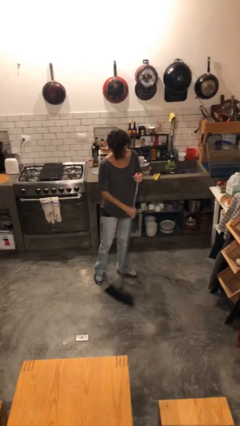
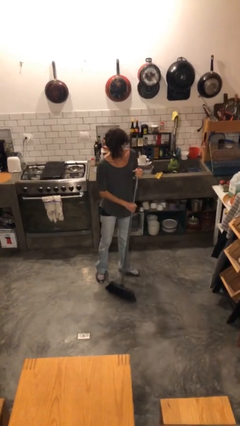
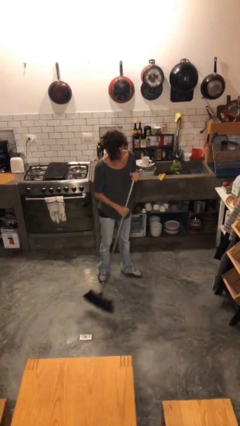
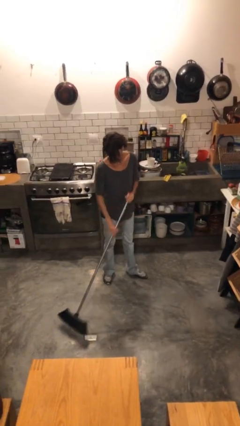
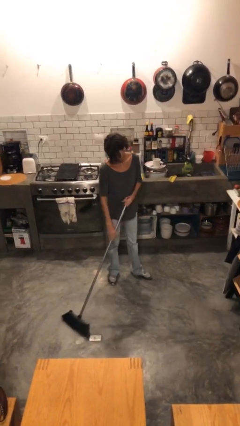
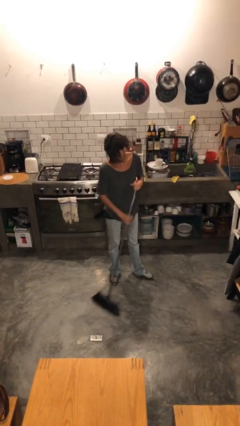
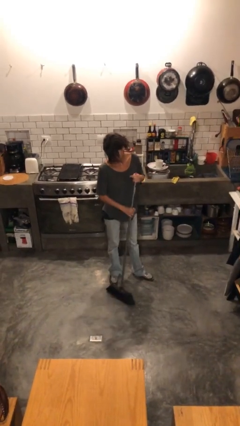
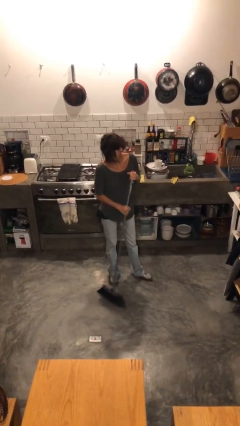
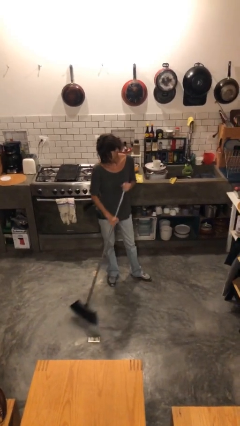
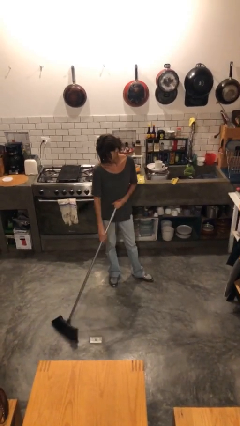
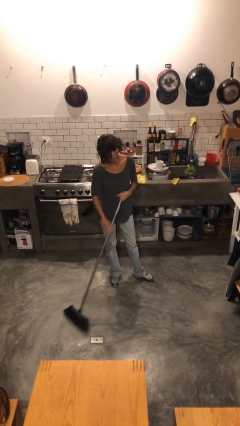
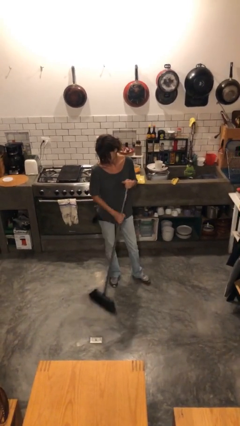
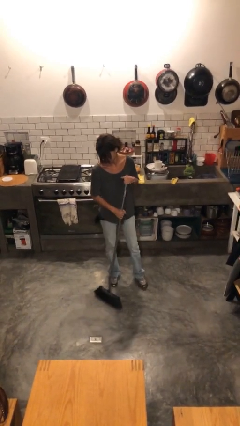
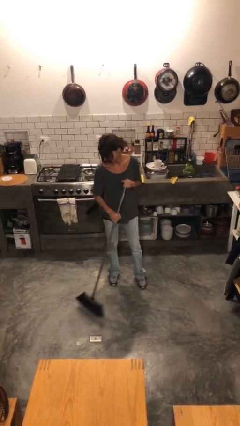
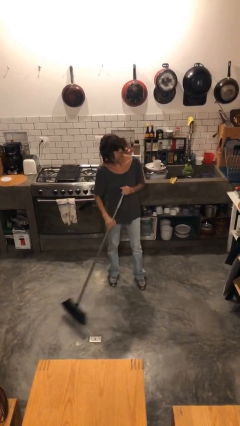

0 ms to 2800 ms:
person sweeps floor

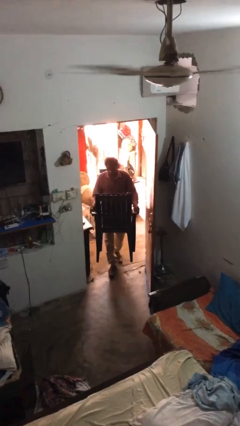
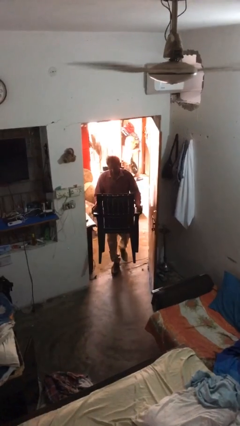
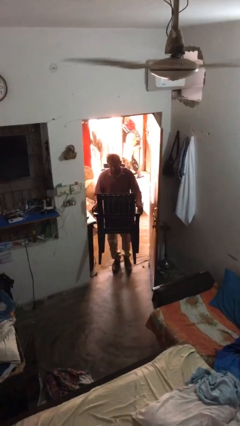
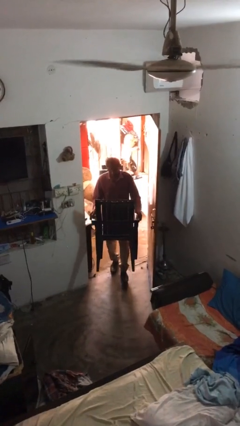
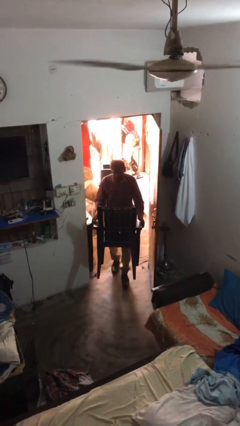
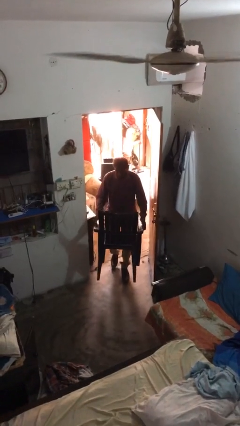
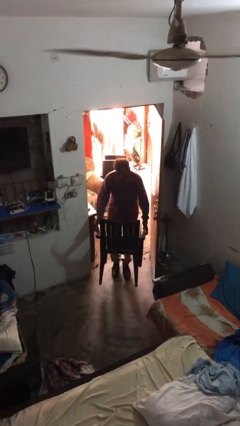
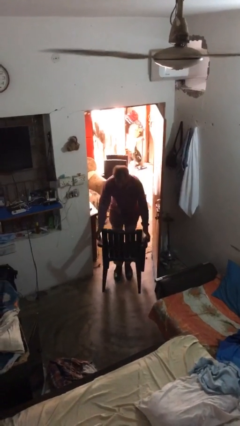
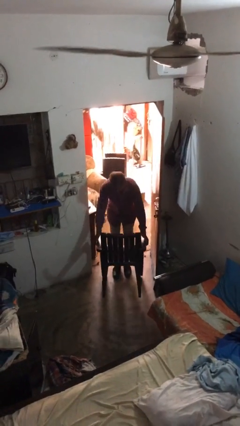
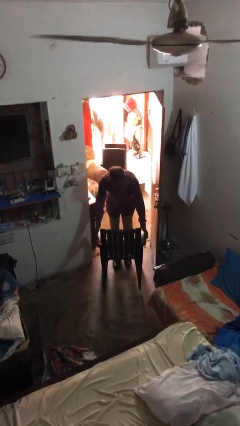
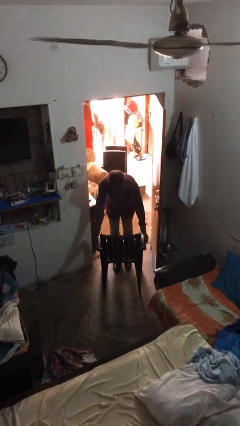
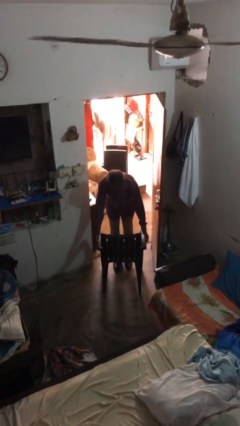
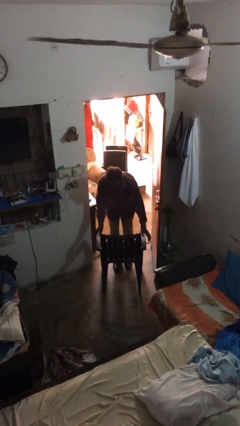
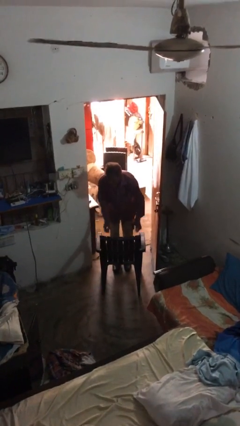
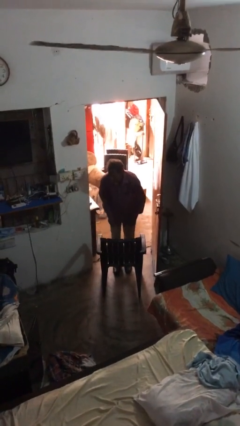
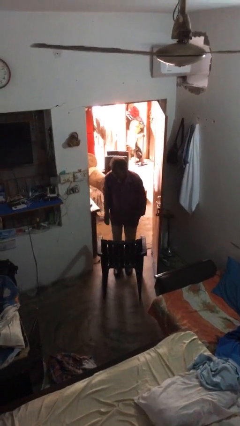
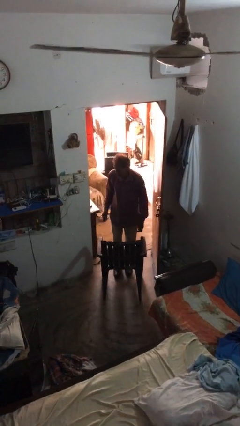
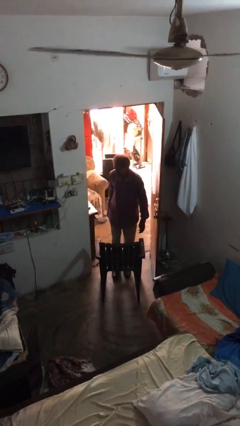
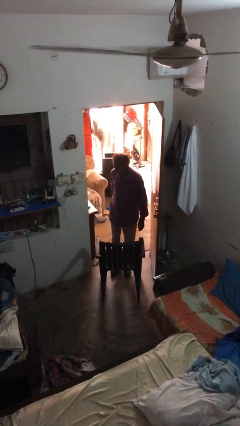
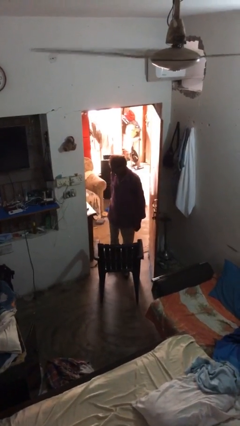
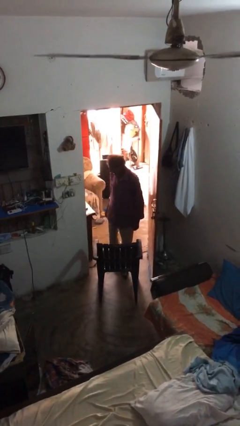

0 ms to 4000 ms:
person puts down object on floor

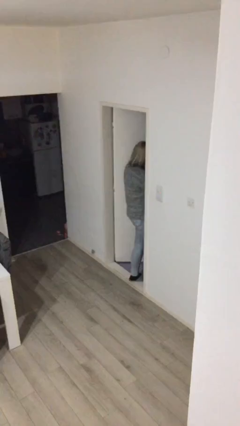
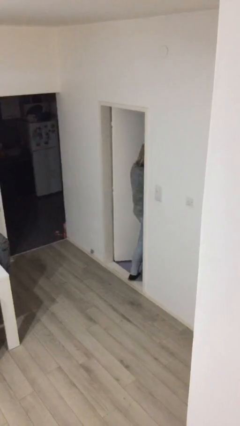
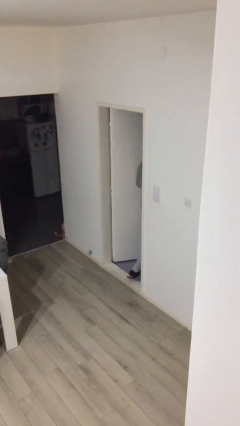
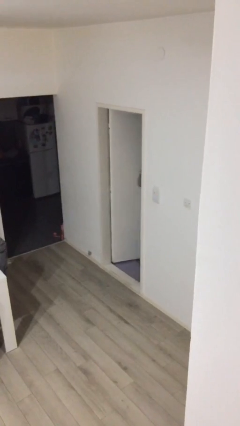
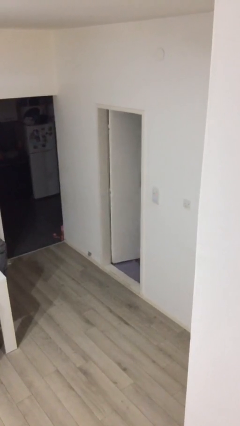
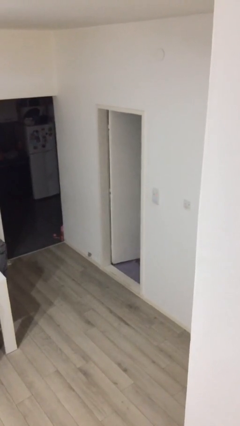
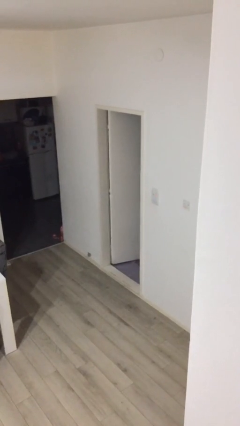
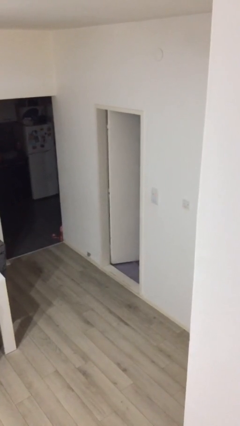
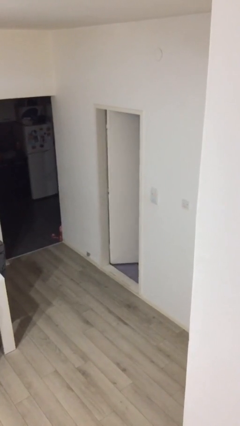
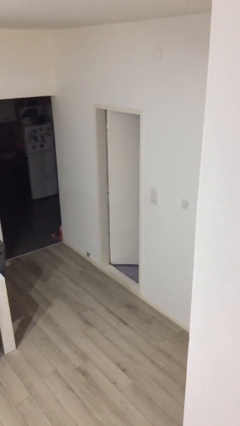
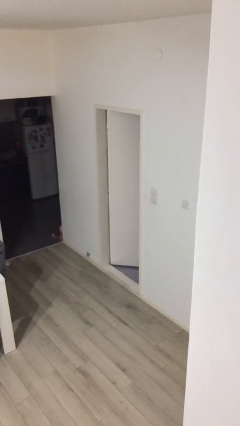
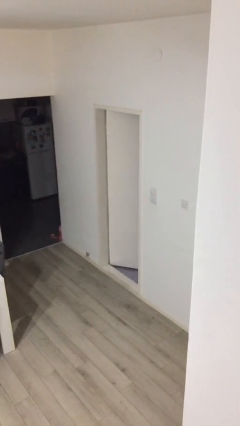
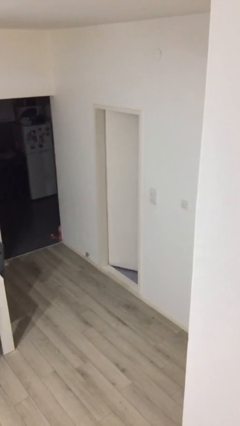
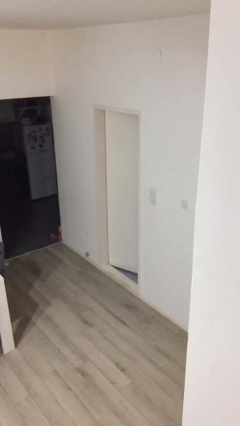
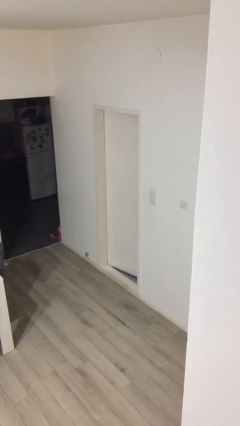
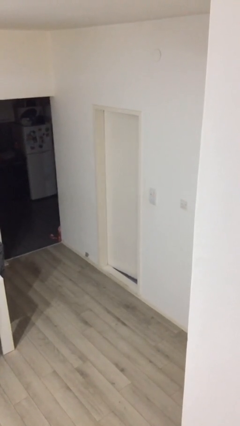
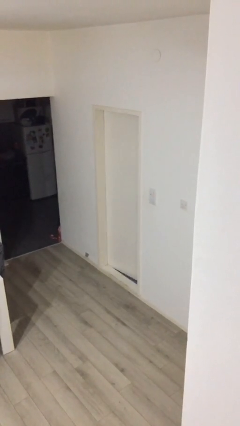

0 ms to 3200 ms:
person exits scene through structure

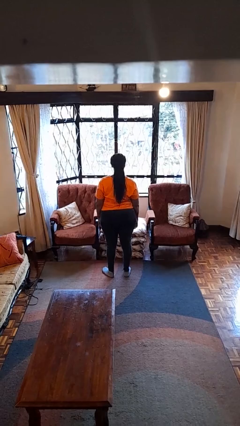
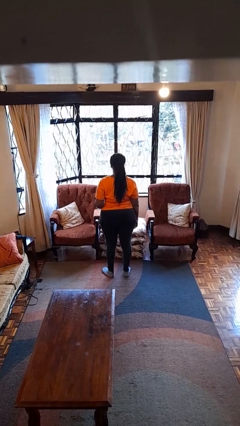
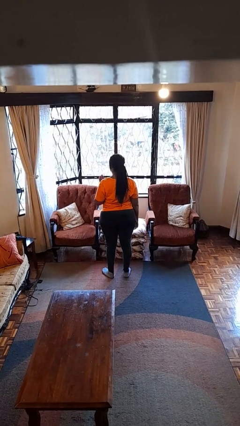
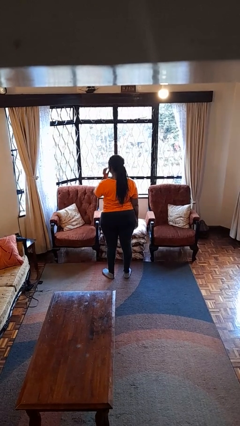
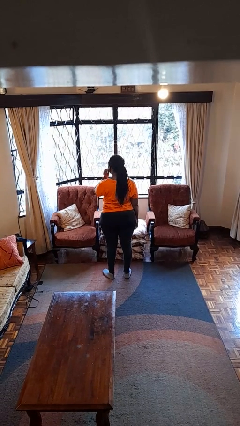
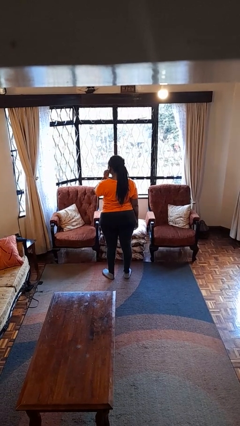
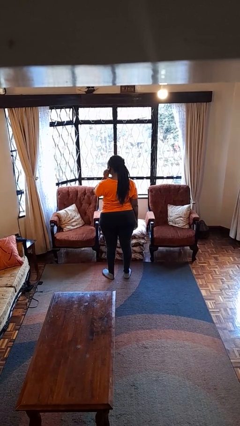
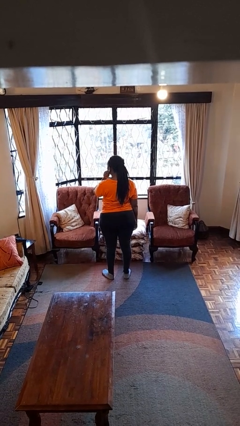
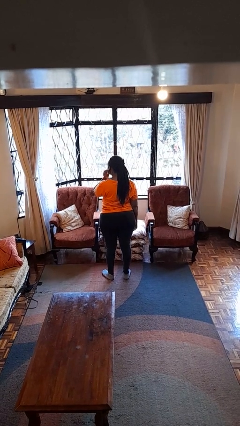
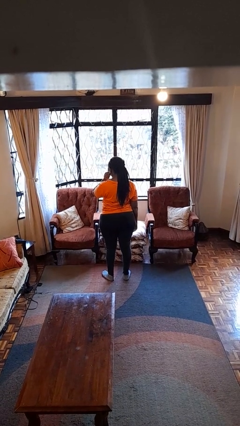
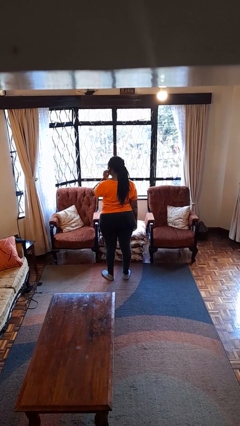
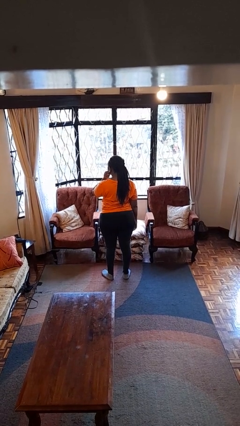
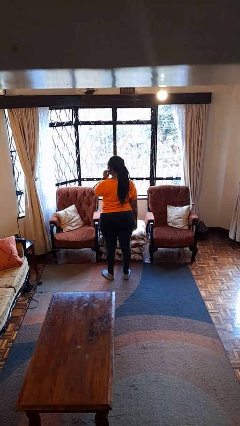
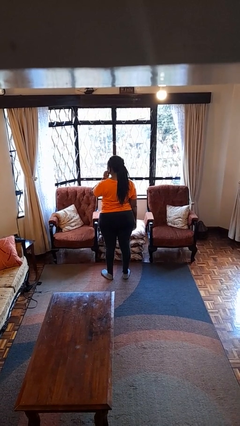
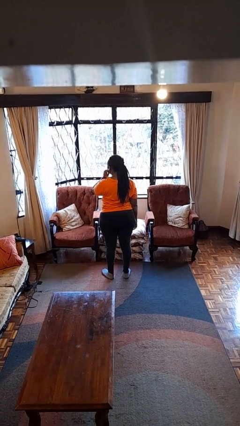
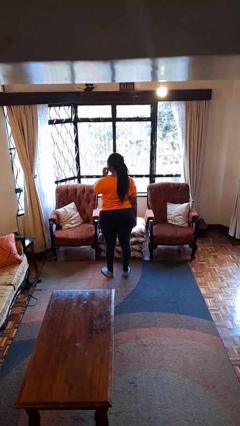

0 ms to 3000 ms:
person touches earlobe

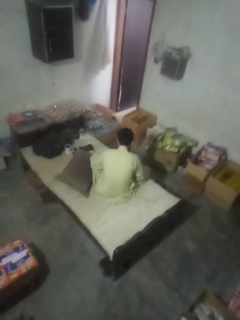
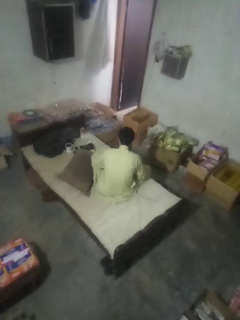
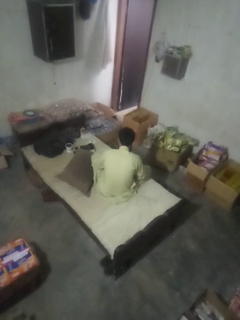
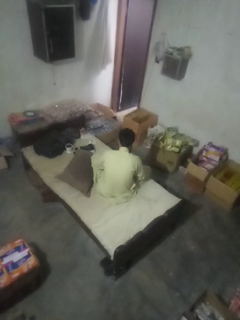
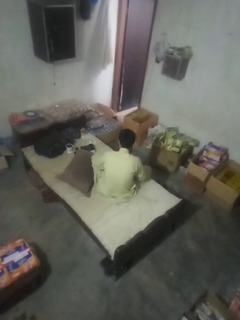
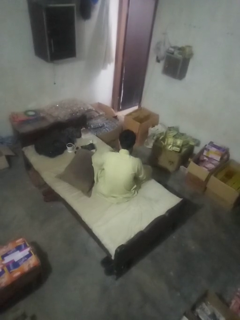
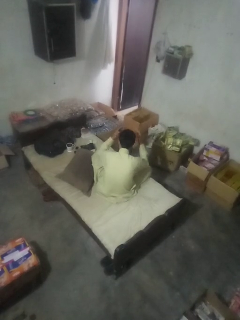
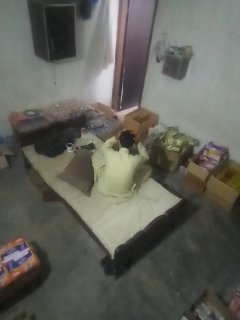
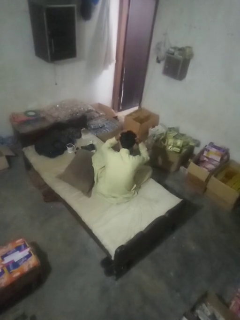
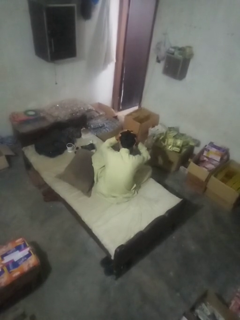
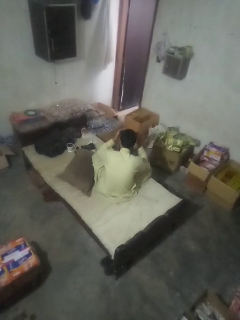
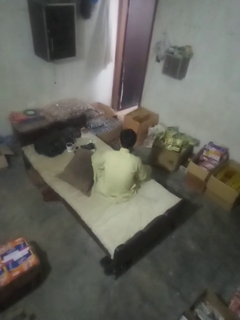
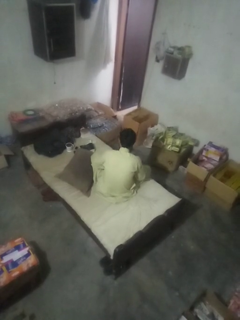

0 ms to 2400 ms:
person pats head

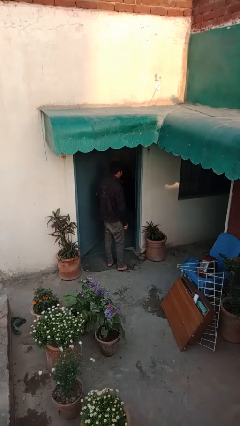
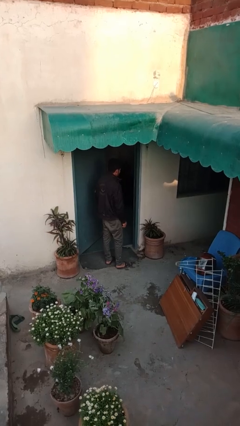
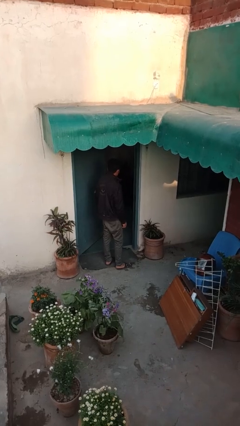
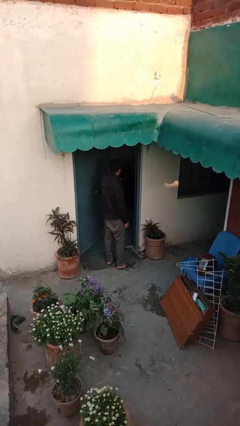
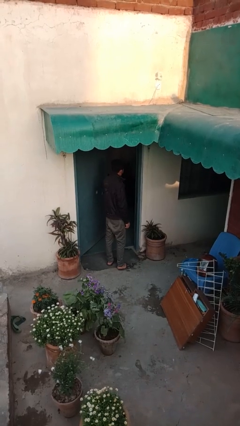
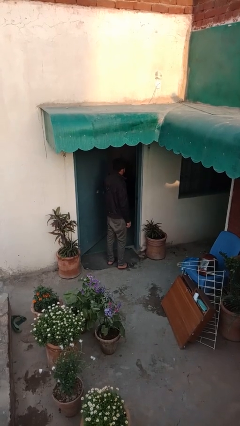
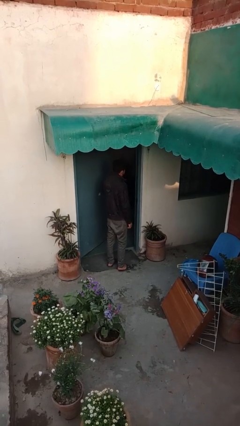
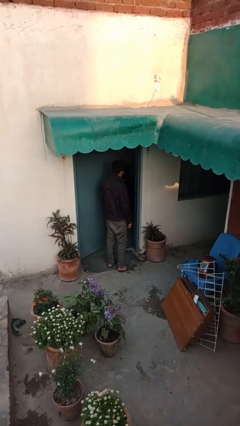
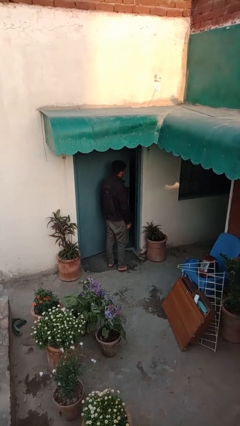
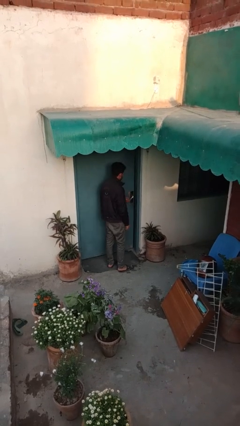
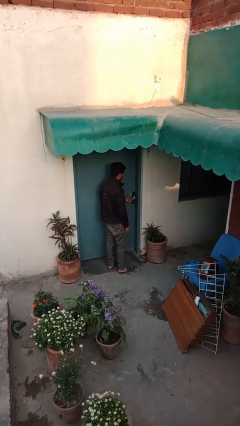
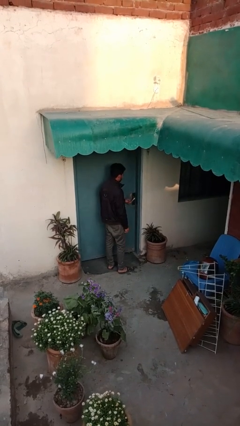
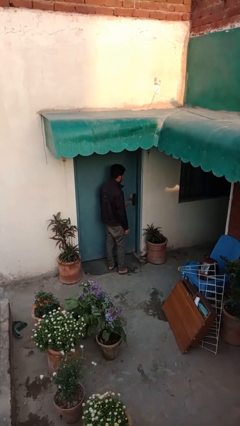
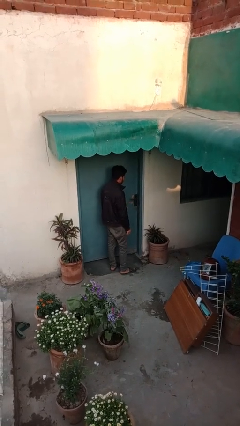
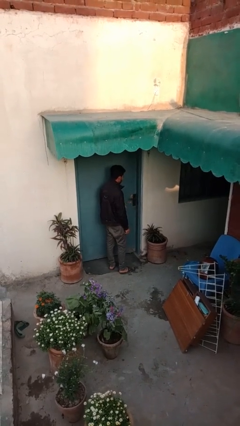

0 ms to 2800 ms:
person closes facility door
